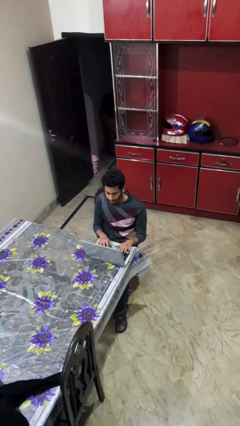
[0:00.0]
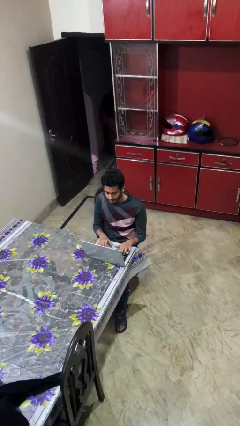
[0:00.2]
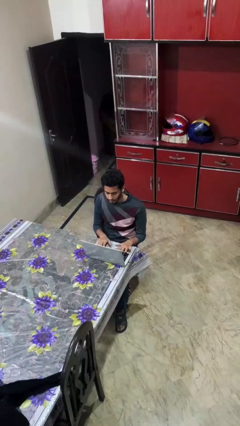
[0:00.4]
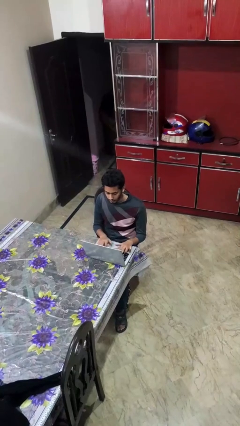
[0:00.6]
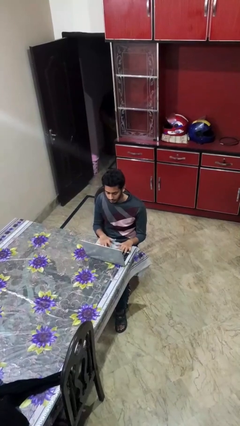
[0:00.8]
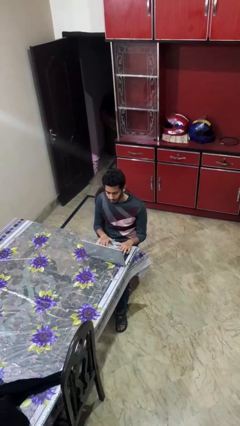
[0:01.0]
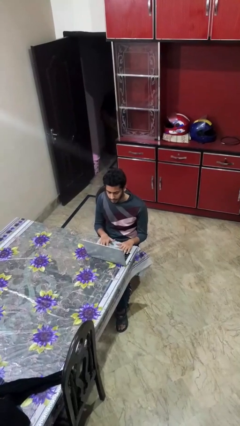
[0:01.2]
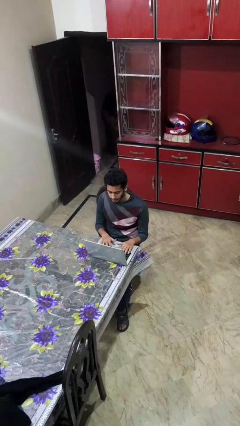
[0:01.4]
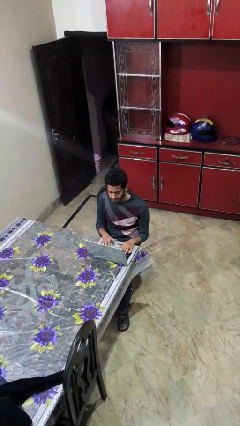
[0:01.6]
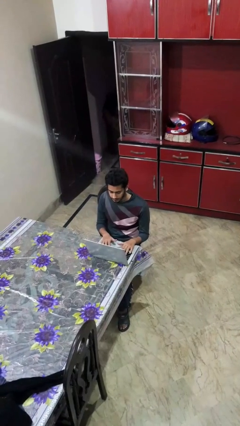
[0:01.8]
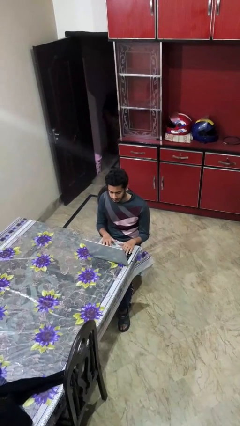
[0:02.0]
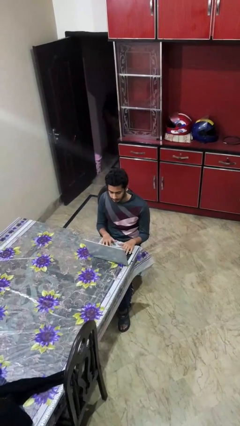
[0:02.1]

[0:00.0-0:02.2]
person interacts with laptop

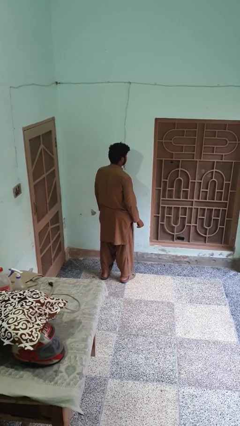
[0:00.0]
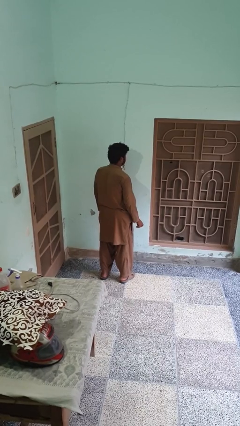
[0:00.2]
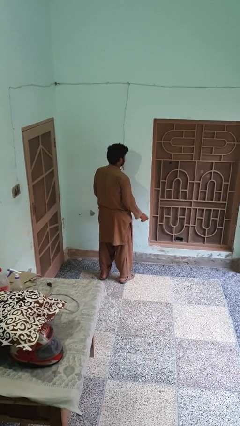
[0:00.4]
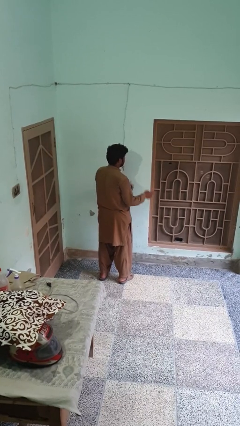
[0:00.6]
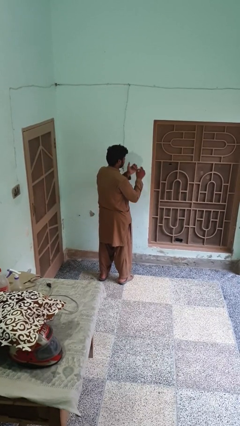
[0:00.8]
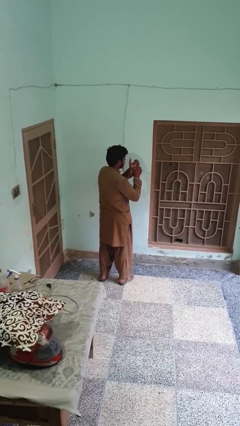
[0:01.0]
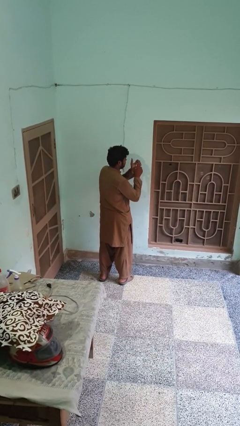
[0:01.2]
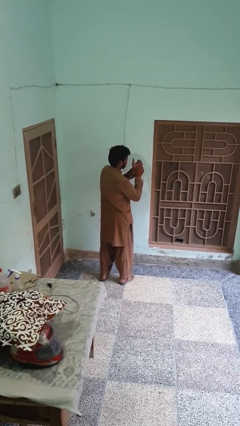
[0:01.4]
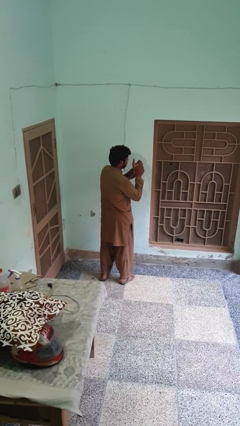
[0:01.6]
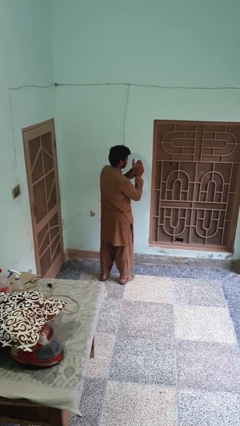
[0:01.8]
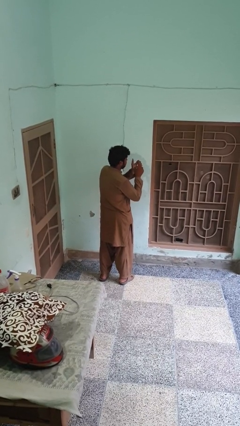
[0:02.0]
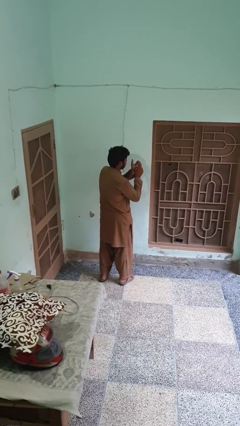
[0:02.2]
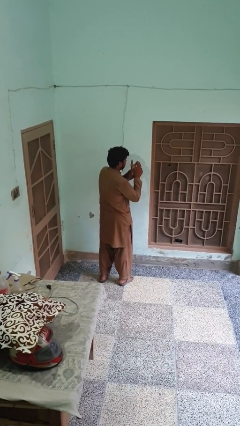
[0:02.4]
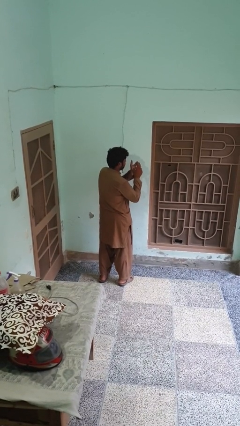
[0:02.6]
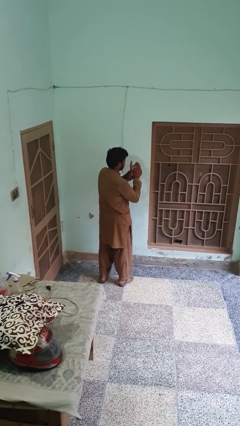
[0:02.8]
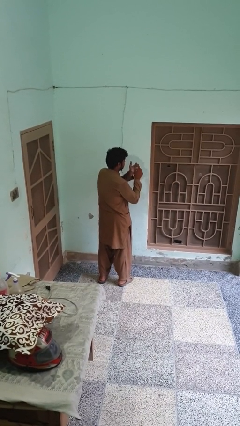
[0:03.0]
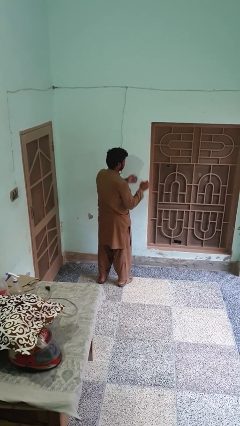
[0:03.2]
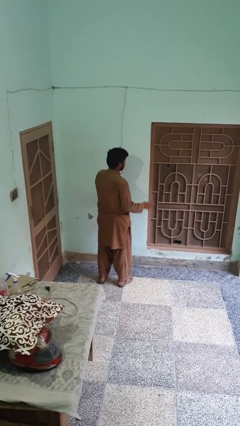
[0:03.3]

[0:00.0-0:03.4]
person paints fingernails

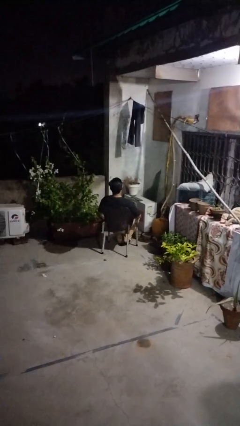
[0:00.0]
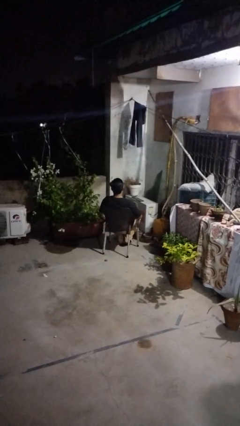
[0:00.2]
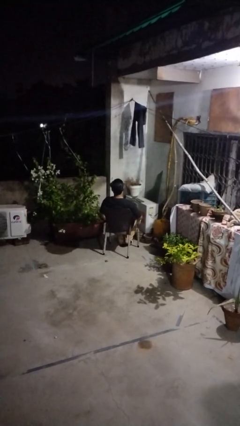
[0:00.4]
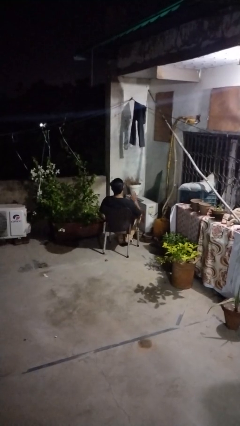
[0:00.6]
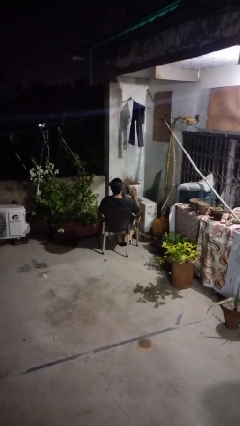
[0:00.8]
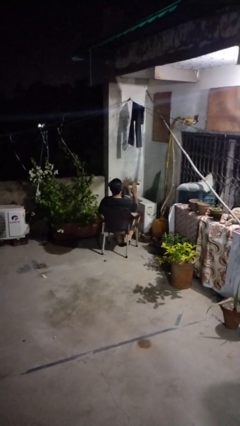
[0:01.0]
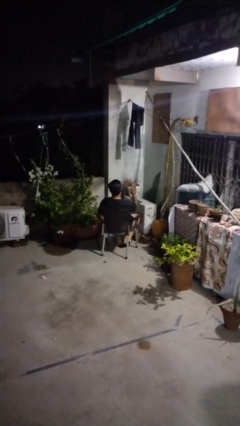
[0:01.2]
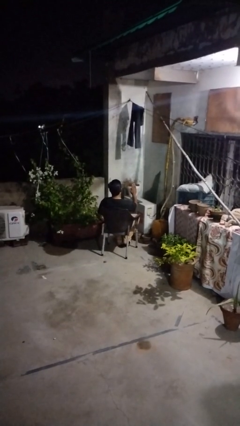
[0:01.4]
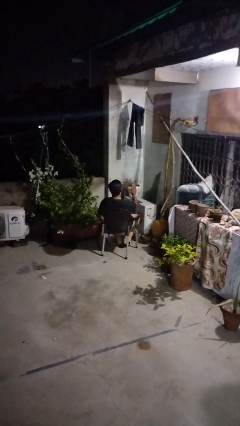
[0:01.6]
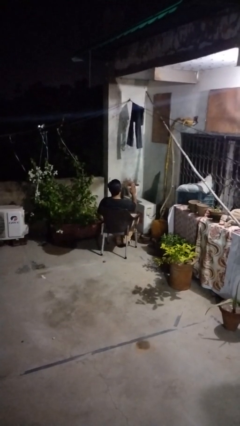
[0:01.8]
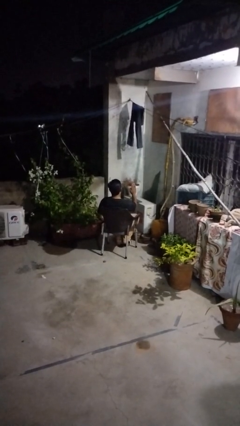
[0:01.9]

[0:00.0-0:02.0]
person gestures stop

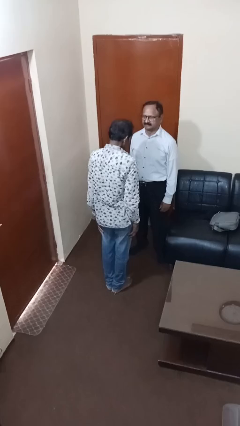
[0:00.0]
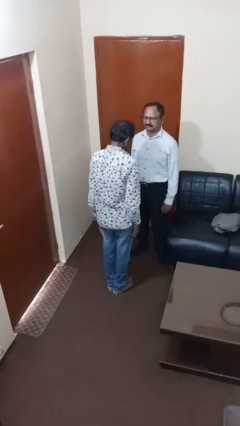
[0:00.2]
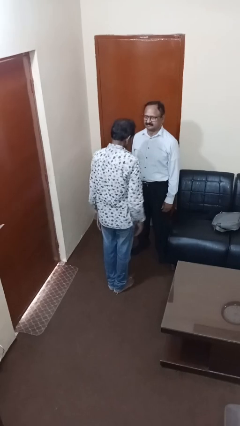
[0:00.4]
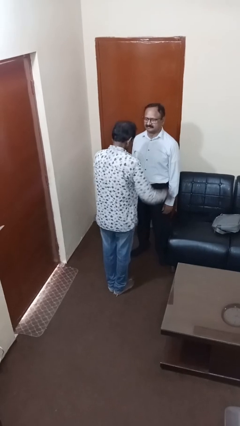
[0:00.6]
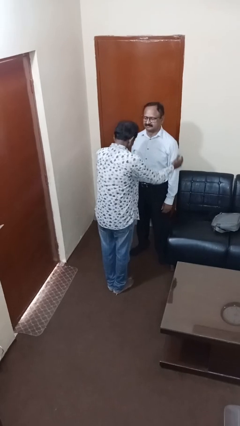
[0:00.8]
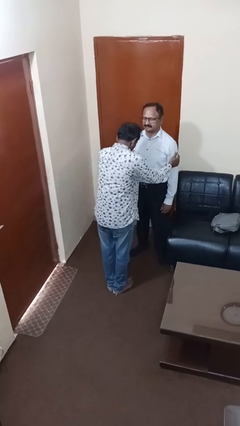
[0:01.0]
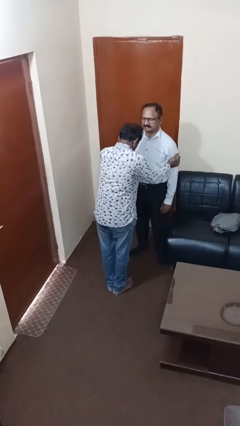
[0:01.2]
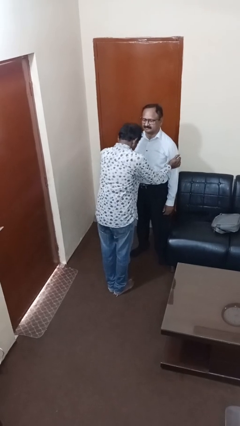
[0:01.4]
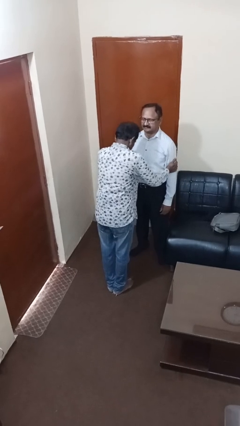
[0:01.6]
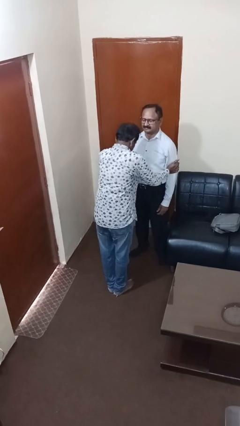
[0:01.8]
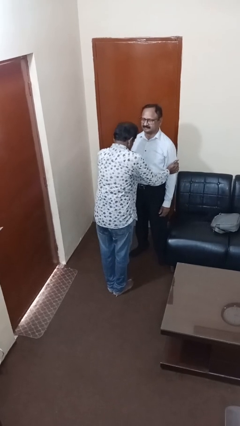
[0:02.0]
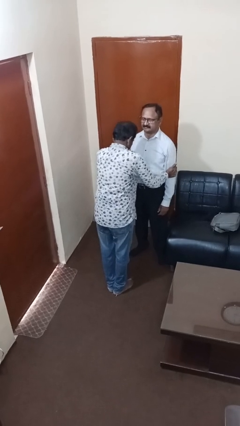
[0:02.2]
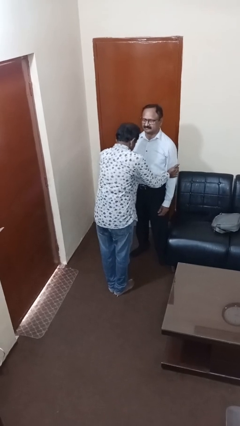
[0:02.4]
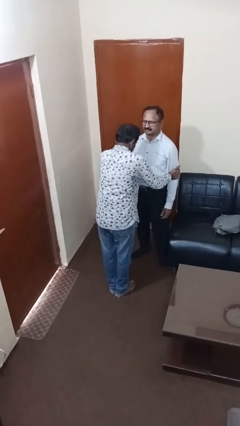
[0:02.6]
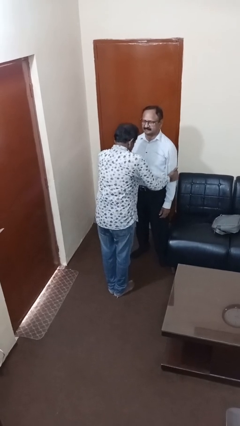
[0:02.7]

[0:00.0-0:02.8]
person grabs person by bicep

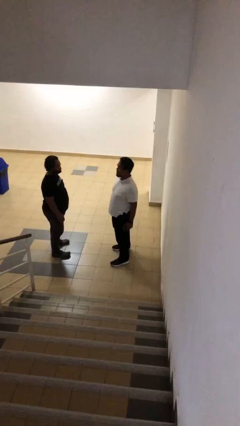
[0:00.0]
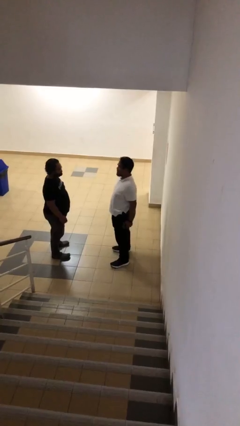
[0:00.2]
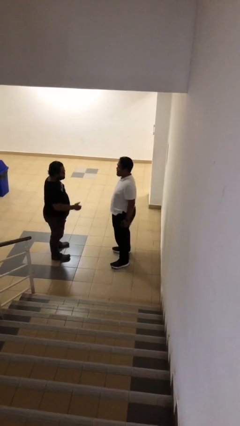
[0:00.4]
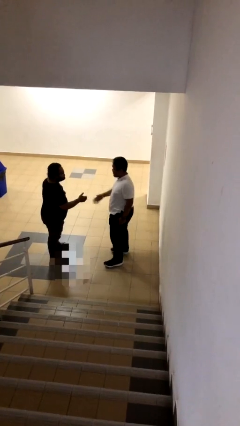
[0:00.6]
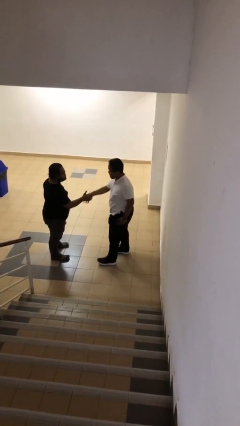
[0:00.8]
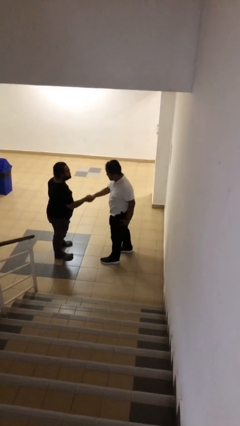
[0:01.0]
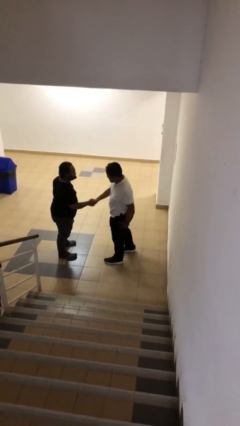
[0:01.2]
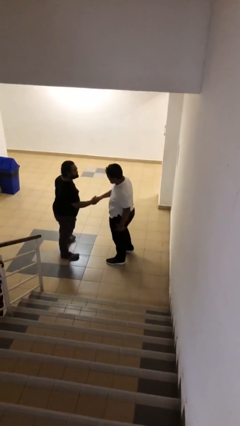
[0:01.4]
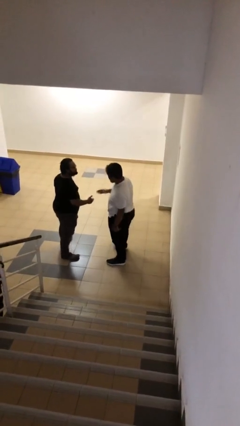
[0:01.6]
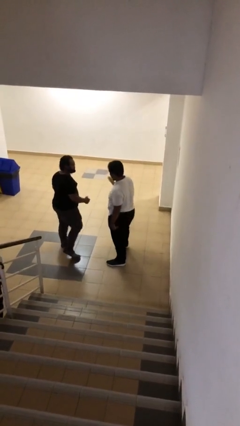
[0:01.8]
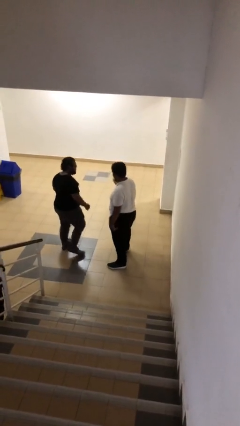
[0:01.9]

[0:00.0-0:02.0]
person shakes hand

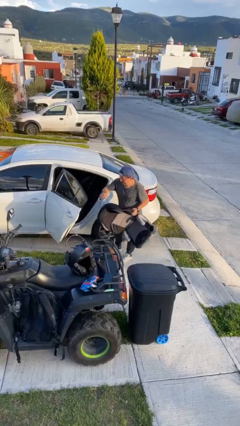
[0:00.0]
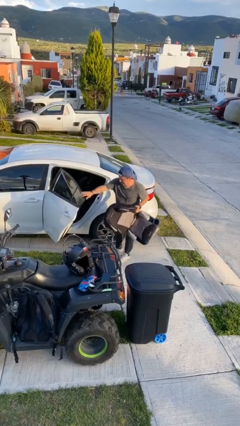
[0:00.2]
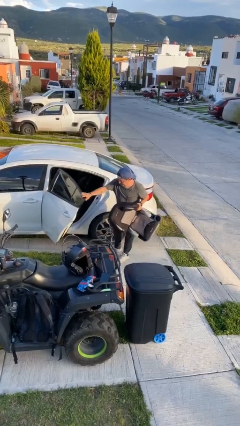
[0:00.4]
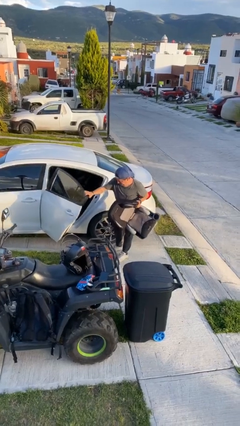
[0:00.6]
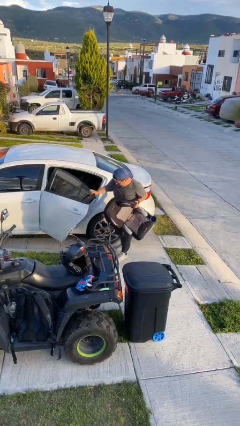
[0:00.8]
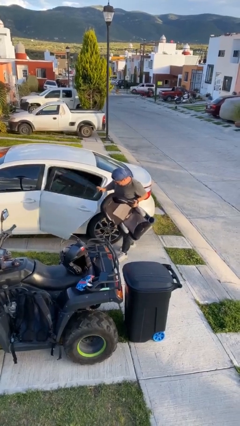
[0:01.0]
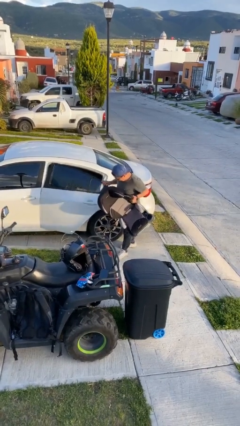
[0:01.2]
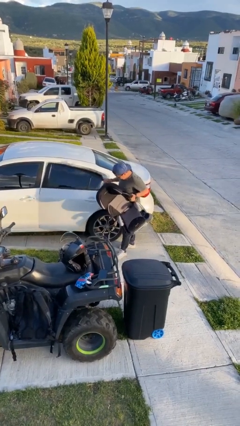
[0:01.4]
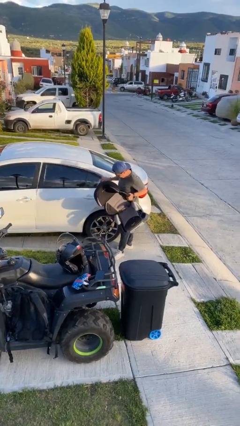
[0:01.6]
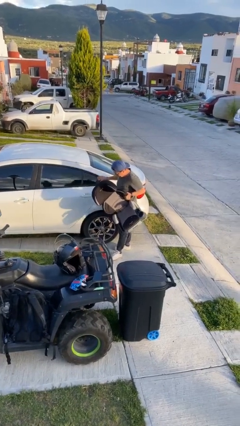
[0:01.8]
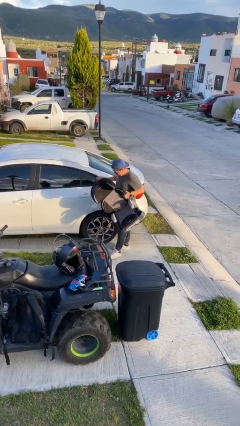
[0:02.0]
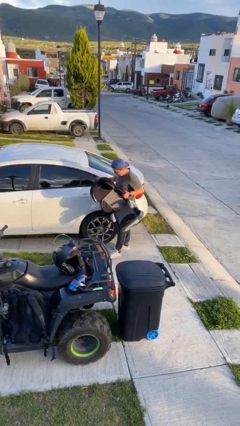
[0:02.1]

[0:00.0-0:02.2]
person closes car door

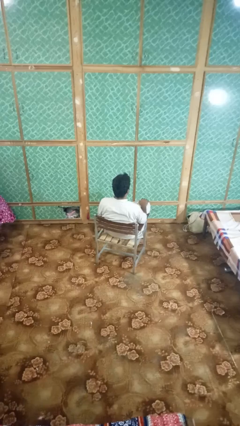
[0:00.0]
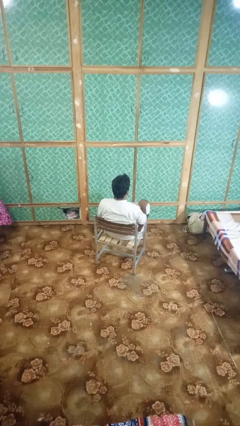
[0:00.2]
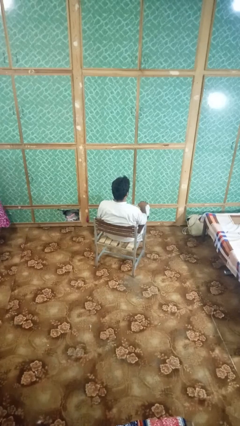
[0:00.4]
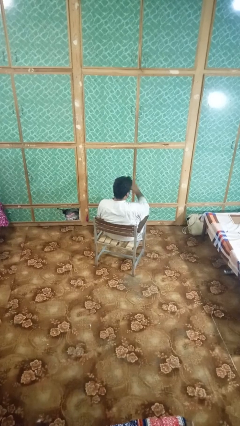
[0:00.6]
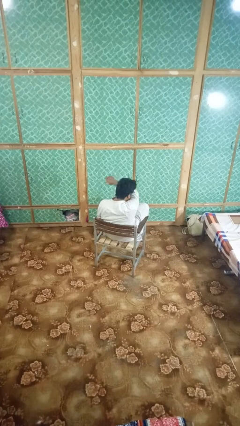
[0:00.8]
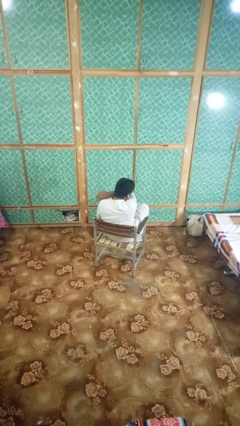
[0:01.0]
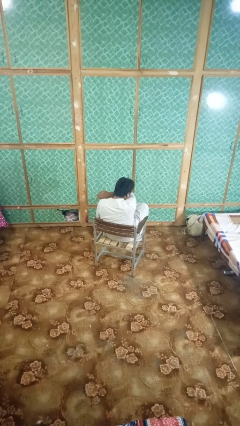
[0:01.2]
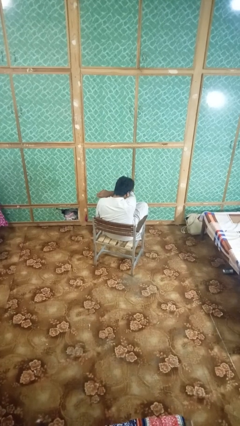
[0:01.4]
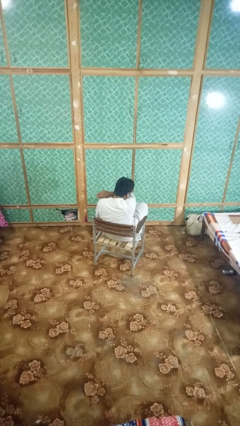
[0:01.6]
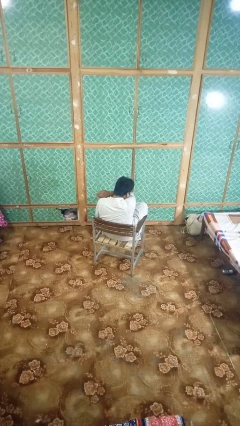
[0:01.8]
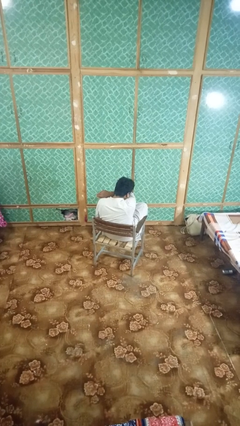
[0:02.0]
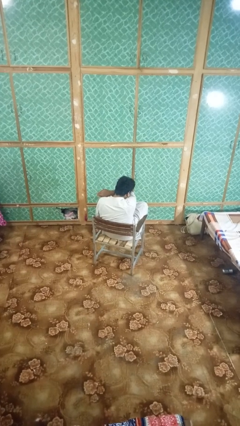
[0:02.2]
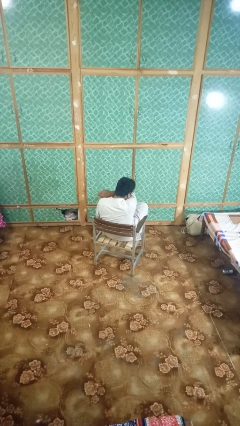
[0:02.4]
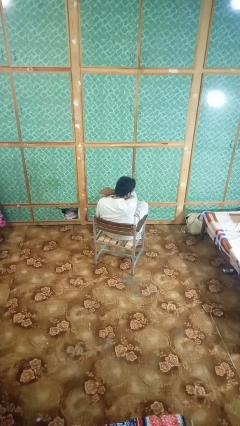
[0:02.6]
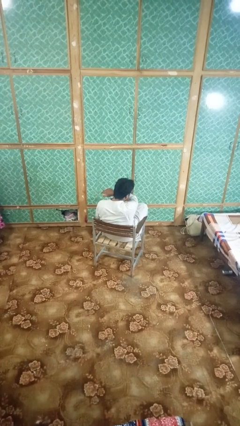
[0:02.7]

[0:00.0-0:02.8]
person sneezes into arm
